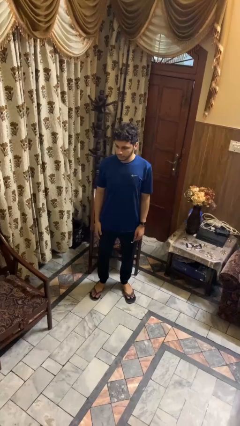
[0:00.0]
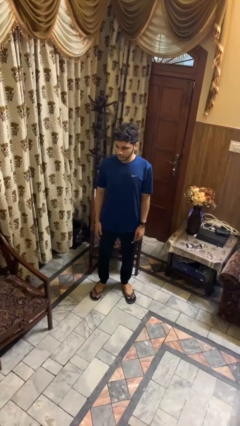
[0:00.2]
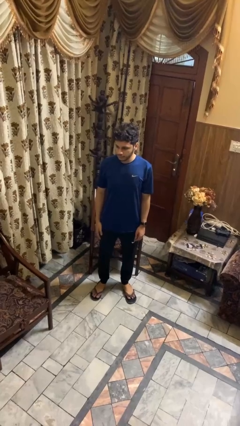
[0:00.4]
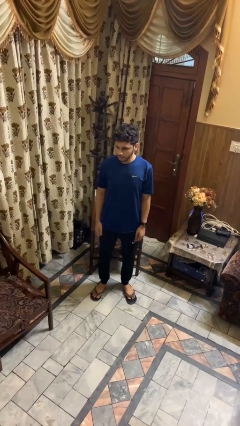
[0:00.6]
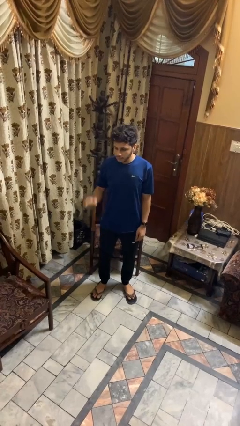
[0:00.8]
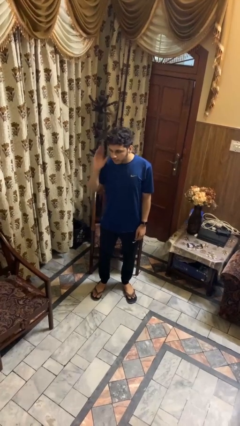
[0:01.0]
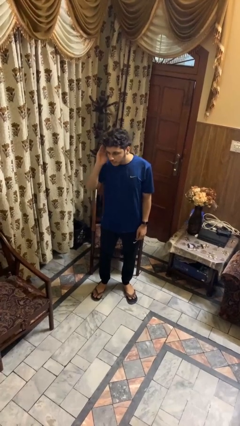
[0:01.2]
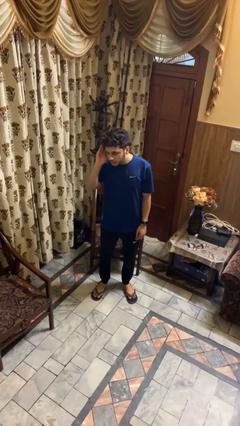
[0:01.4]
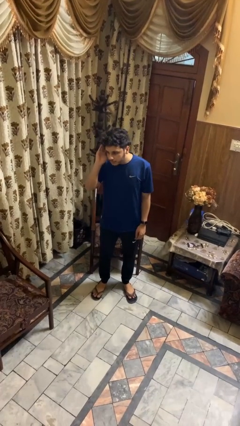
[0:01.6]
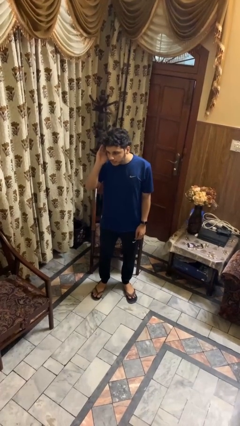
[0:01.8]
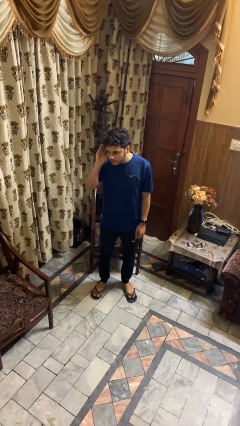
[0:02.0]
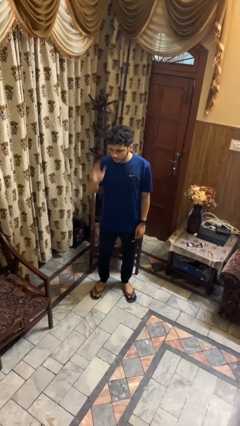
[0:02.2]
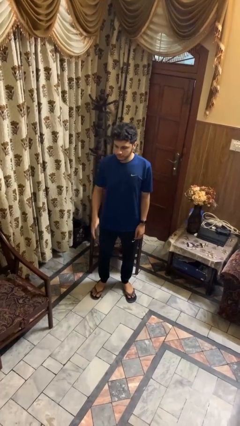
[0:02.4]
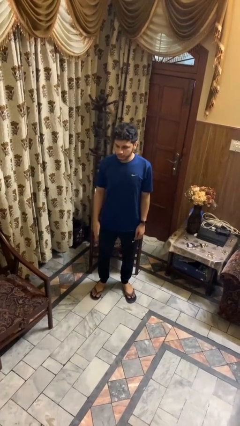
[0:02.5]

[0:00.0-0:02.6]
person gestures listen closely

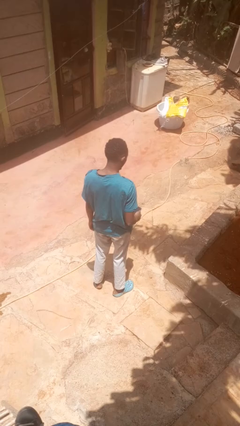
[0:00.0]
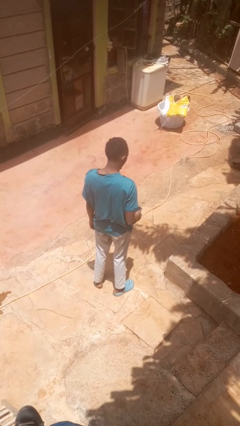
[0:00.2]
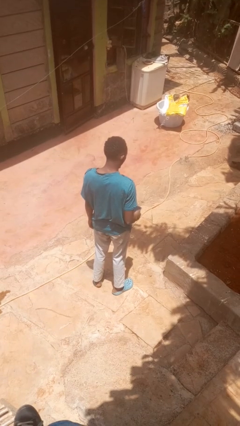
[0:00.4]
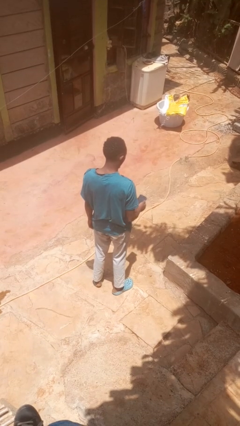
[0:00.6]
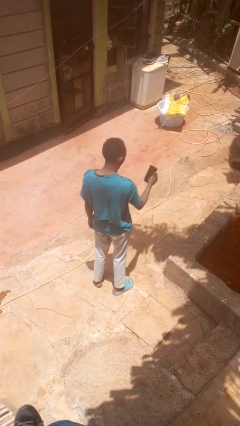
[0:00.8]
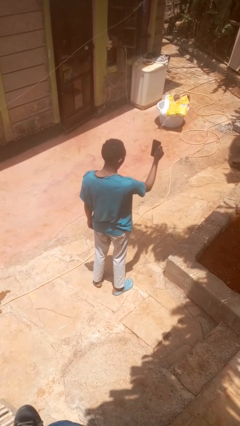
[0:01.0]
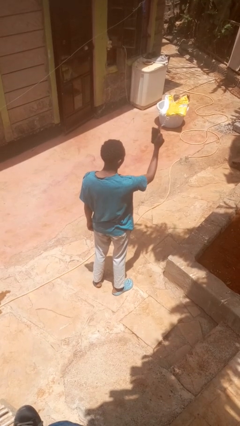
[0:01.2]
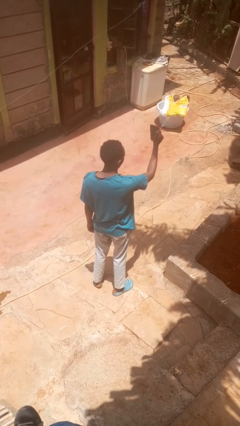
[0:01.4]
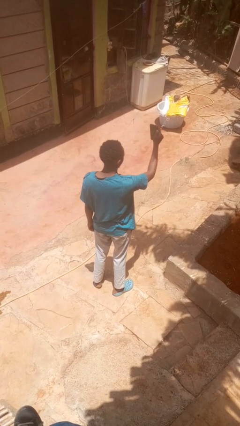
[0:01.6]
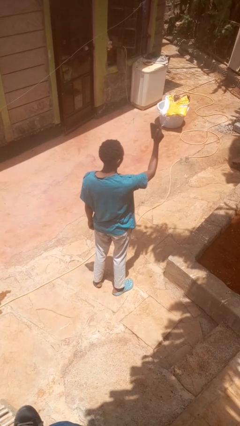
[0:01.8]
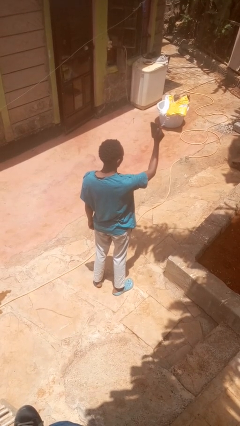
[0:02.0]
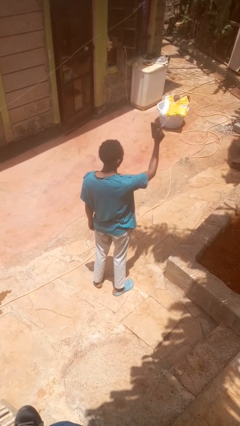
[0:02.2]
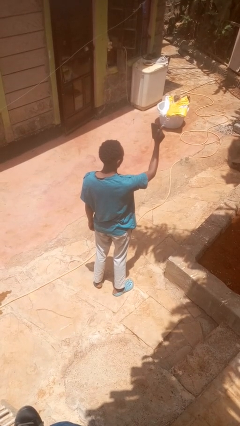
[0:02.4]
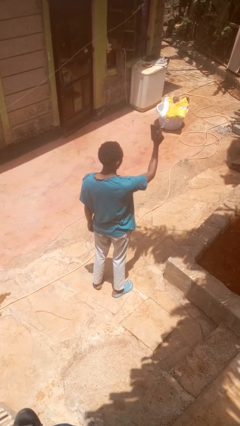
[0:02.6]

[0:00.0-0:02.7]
person takes selfie

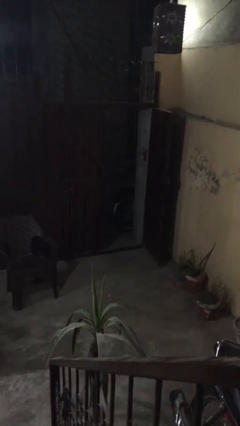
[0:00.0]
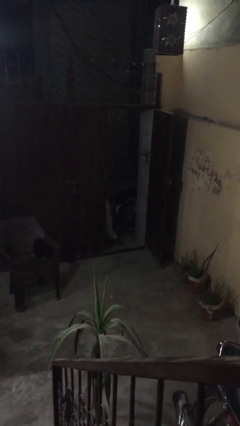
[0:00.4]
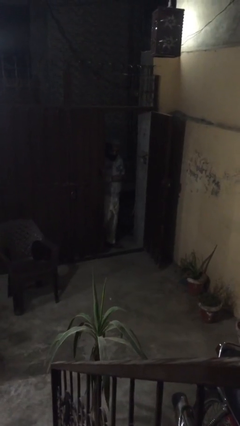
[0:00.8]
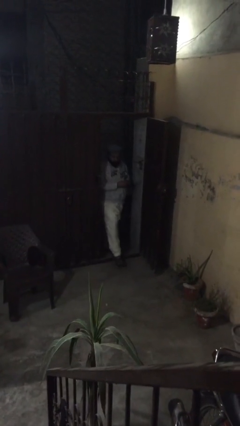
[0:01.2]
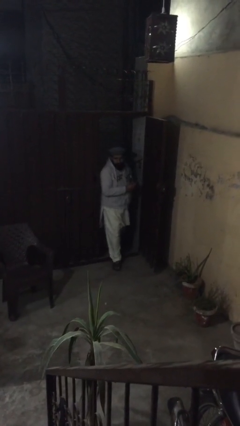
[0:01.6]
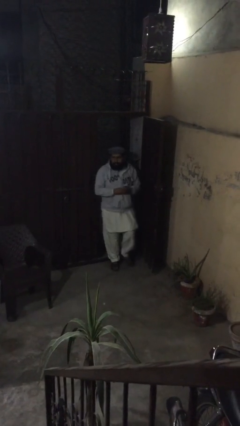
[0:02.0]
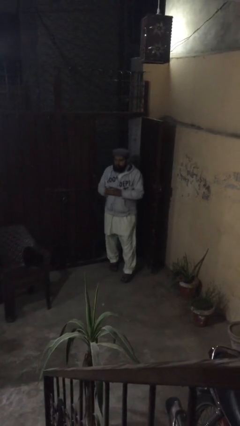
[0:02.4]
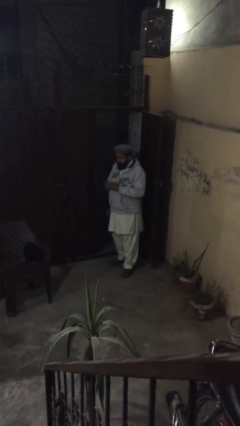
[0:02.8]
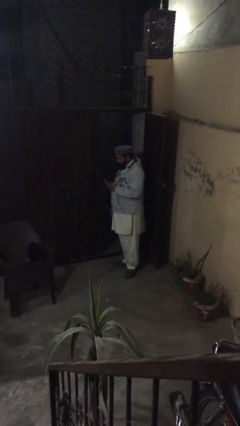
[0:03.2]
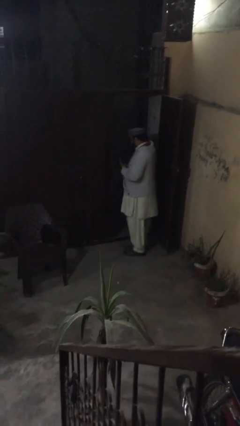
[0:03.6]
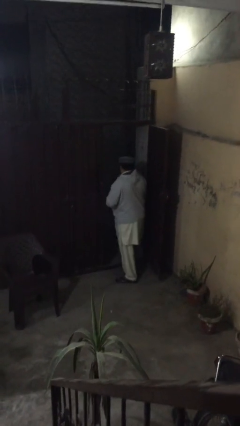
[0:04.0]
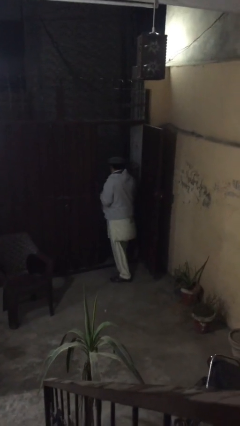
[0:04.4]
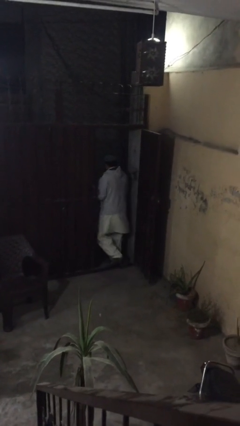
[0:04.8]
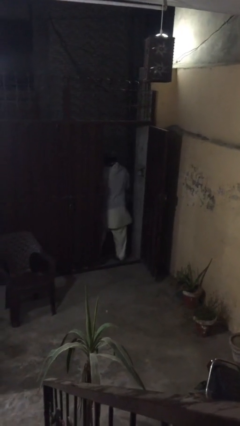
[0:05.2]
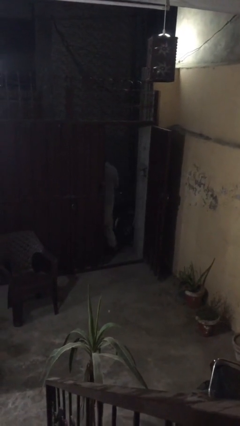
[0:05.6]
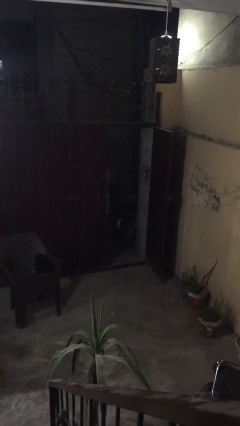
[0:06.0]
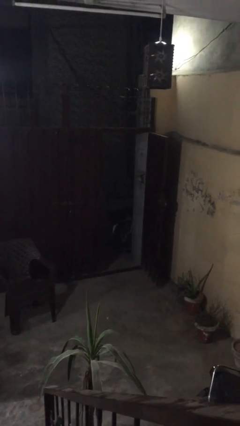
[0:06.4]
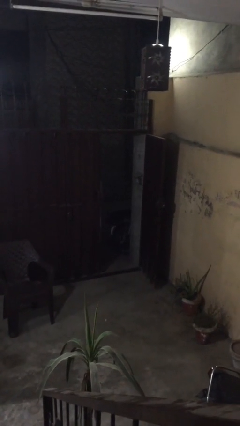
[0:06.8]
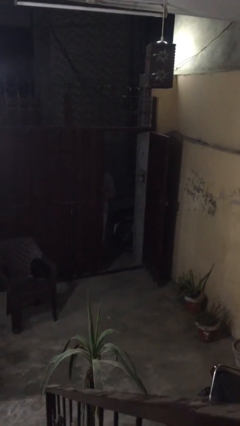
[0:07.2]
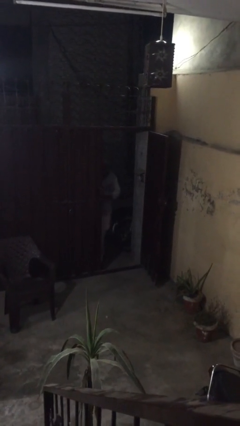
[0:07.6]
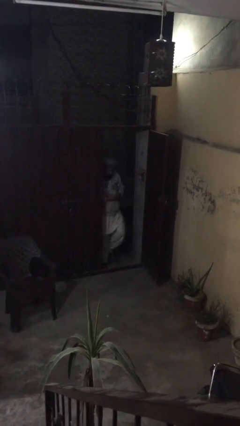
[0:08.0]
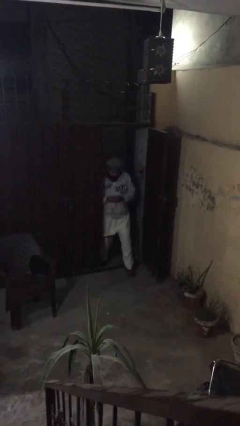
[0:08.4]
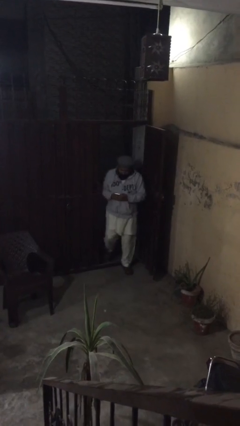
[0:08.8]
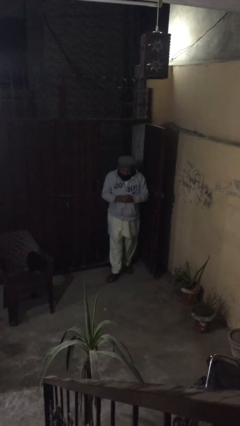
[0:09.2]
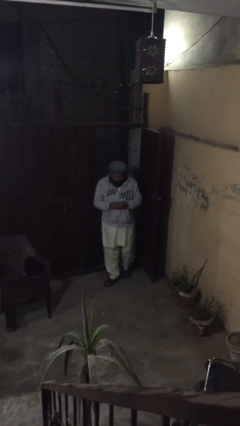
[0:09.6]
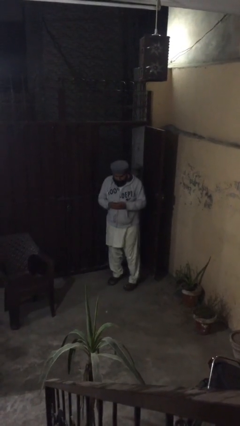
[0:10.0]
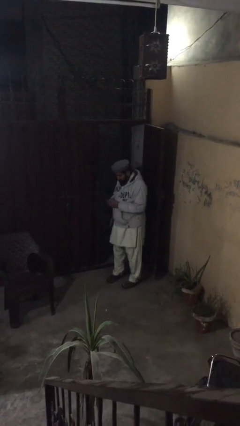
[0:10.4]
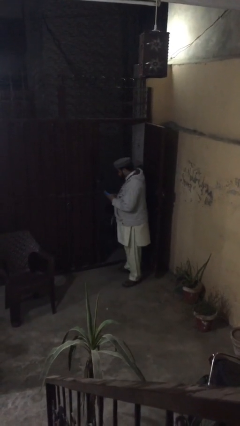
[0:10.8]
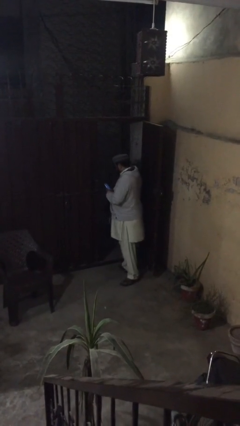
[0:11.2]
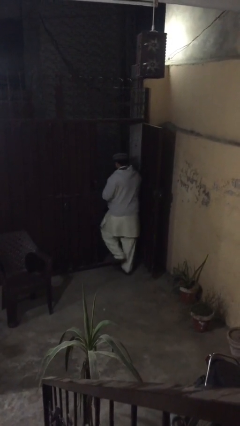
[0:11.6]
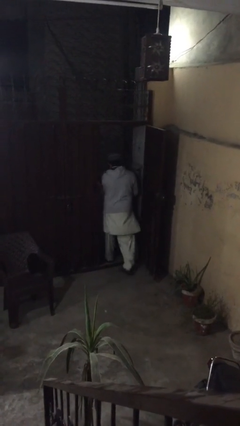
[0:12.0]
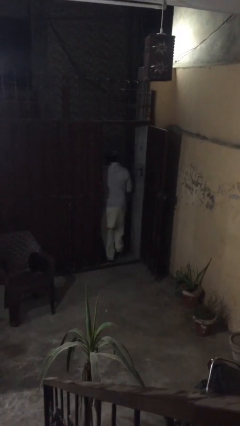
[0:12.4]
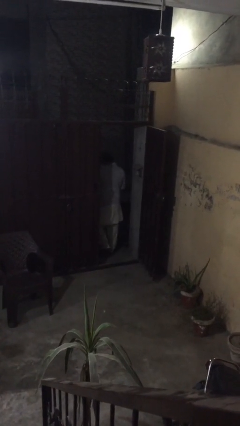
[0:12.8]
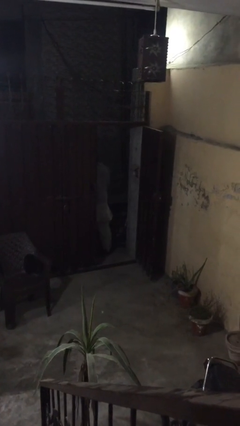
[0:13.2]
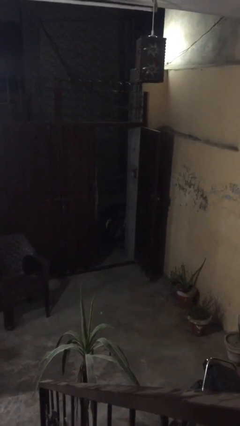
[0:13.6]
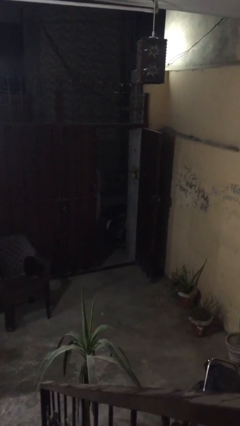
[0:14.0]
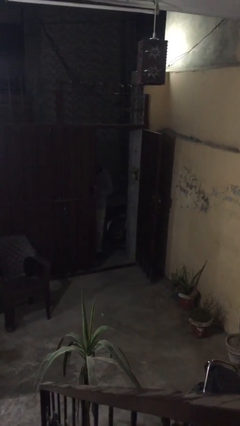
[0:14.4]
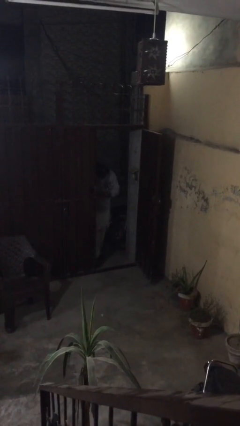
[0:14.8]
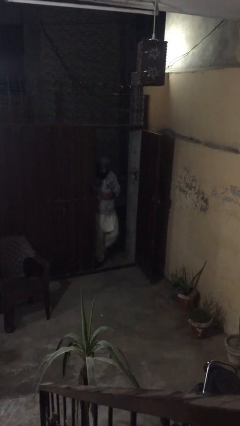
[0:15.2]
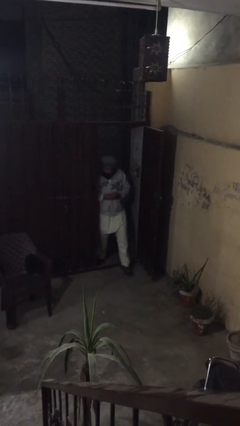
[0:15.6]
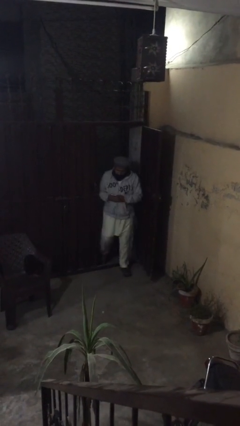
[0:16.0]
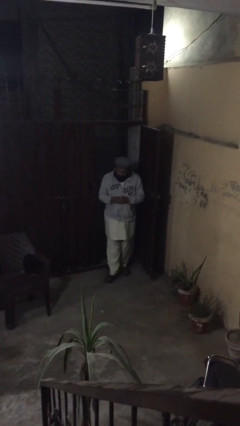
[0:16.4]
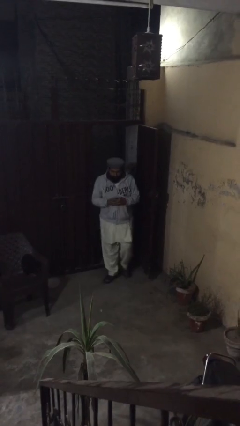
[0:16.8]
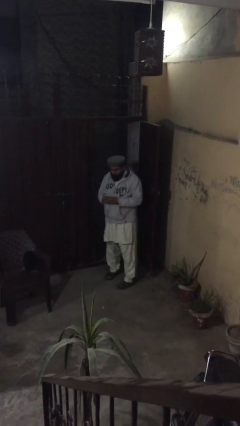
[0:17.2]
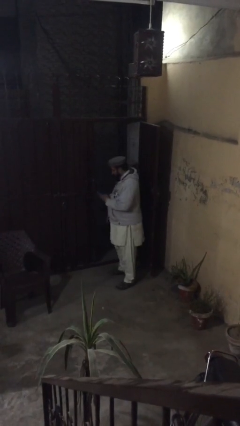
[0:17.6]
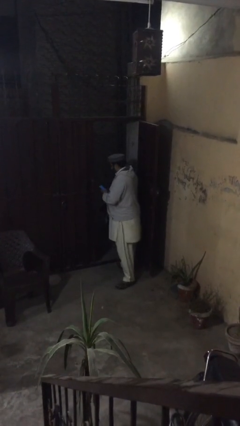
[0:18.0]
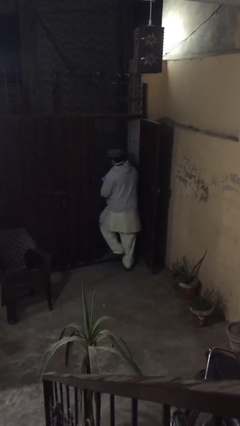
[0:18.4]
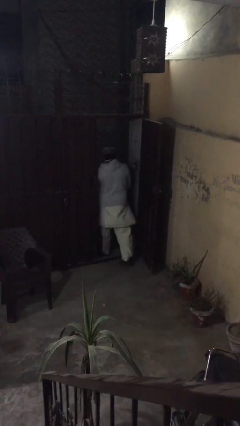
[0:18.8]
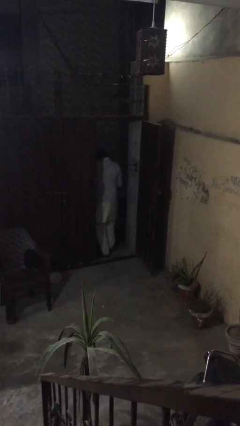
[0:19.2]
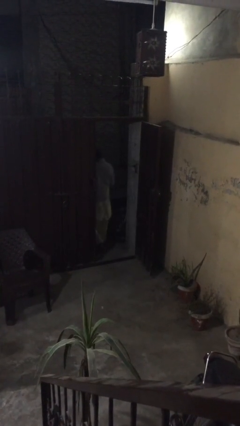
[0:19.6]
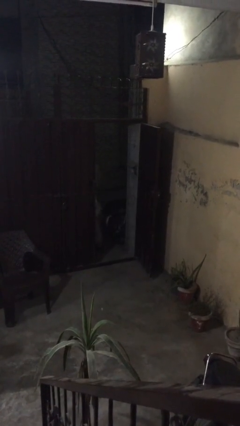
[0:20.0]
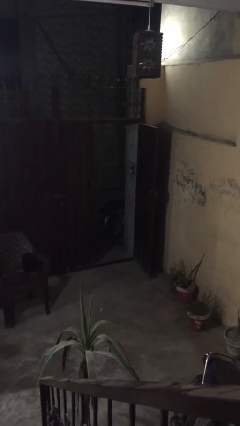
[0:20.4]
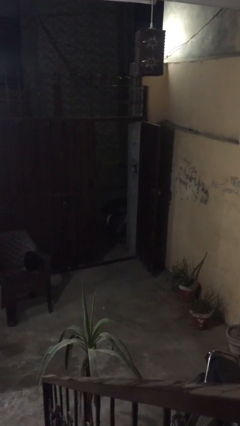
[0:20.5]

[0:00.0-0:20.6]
person texts on phone

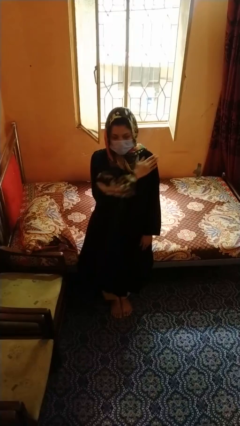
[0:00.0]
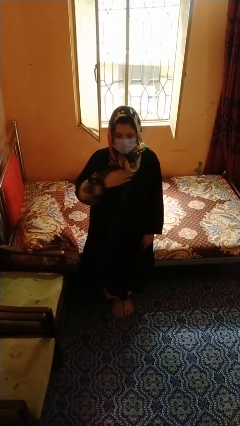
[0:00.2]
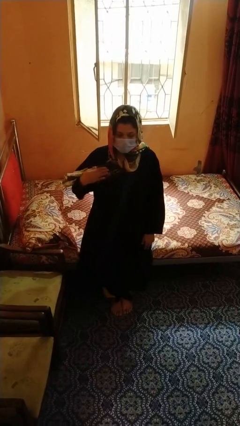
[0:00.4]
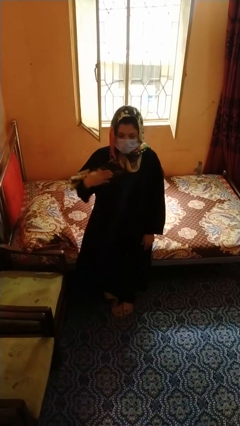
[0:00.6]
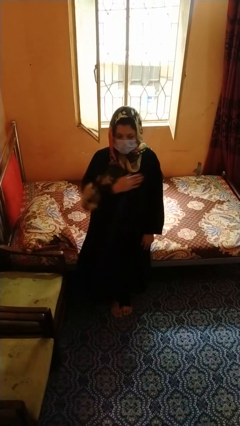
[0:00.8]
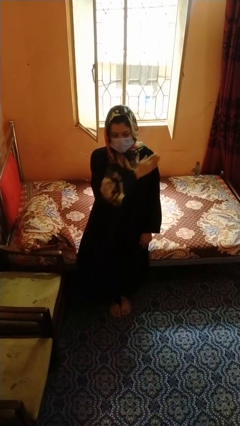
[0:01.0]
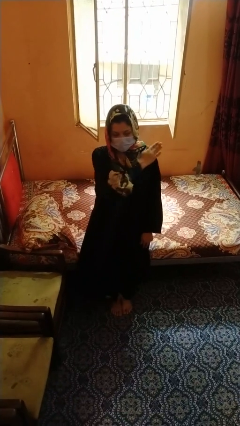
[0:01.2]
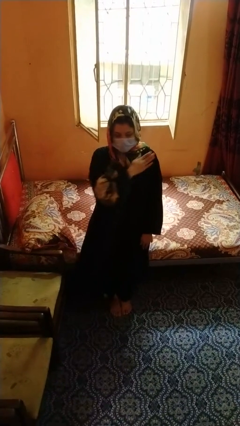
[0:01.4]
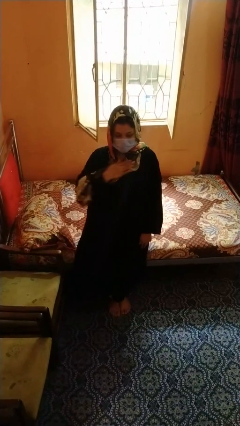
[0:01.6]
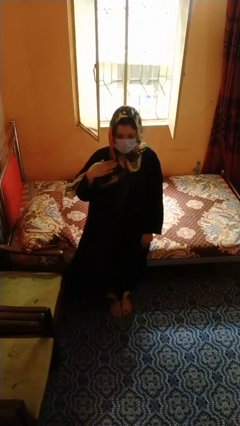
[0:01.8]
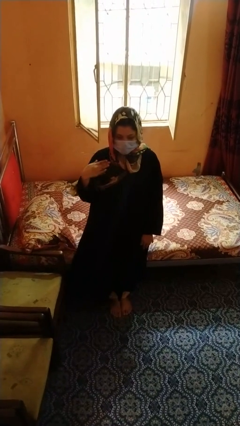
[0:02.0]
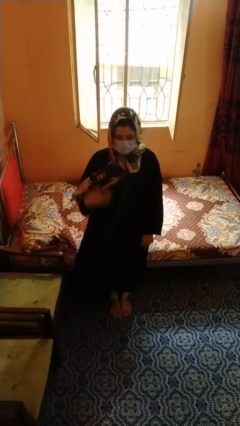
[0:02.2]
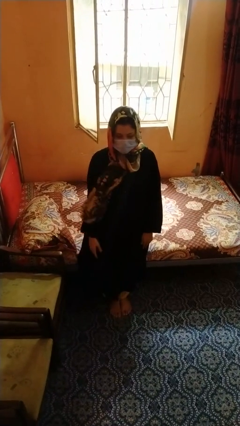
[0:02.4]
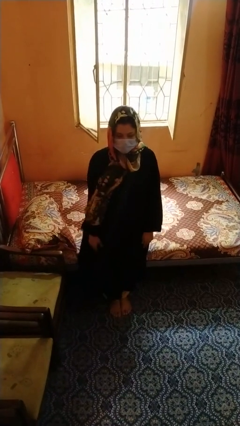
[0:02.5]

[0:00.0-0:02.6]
person gestures cut
